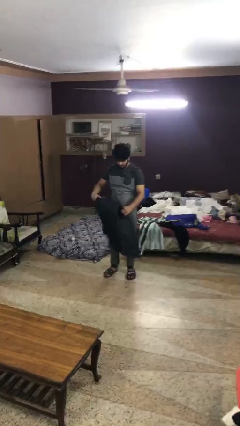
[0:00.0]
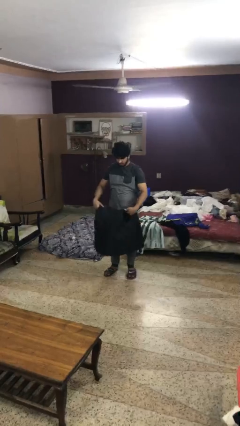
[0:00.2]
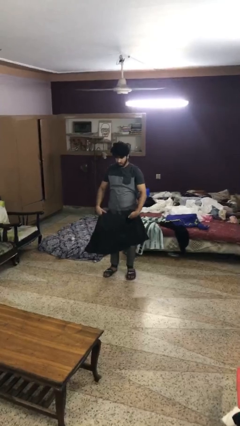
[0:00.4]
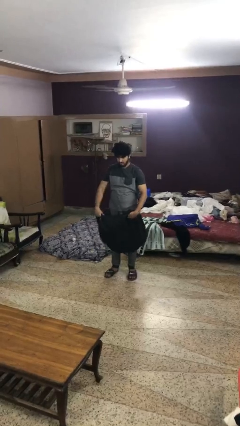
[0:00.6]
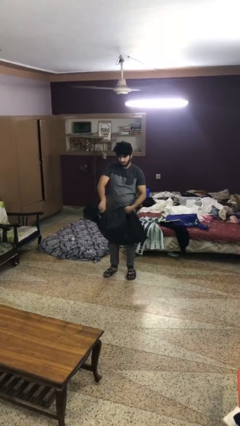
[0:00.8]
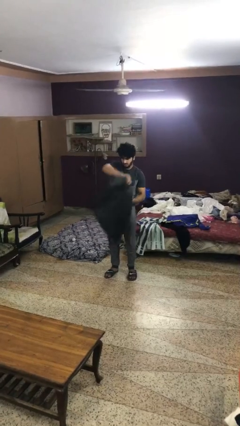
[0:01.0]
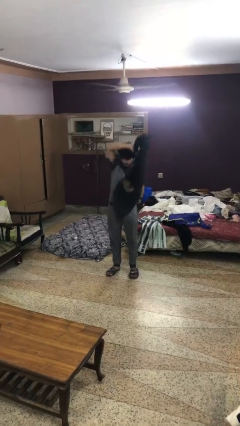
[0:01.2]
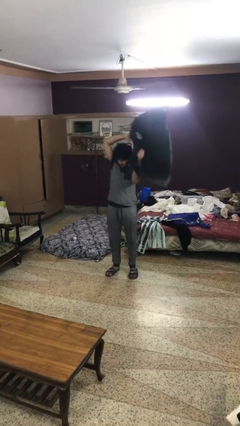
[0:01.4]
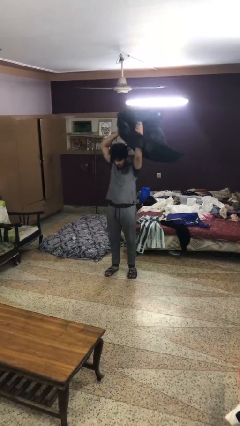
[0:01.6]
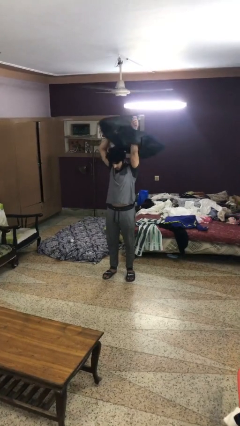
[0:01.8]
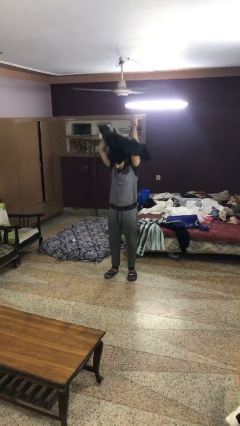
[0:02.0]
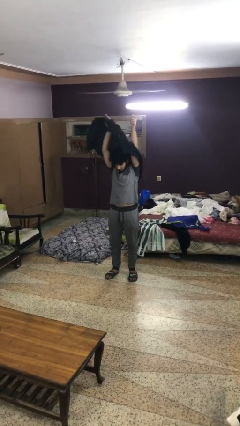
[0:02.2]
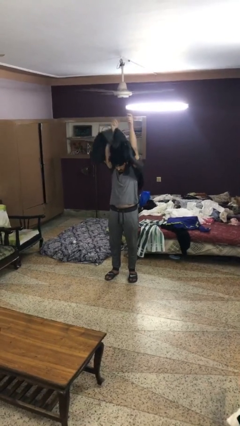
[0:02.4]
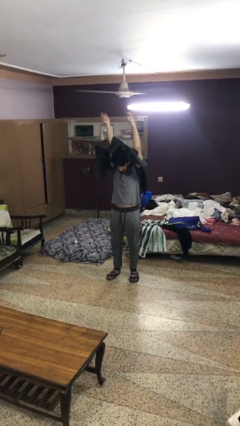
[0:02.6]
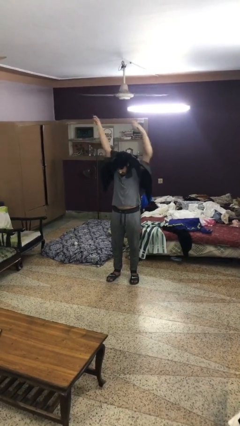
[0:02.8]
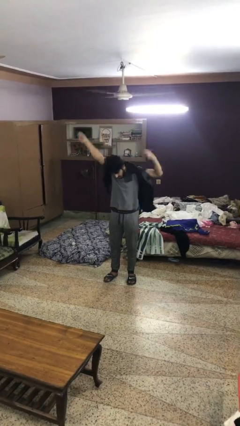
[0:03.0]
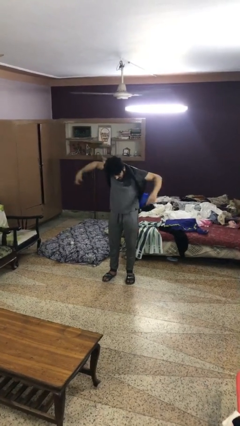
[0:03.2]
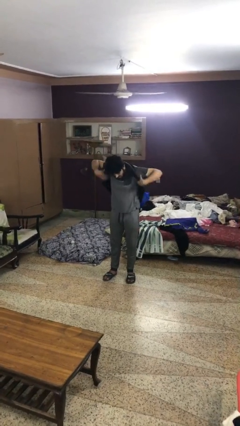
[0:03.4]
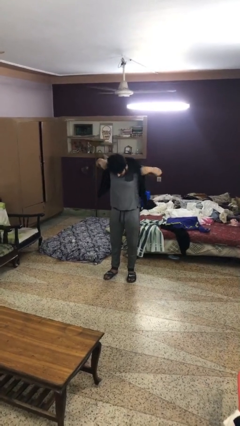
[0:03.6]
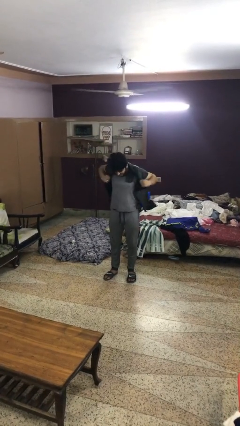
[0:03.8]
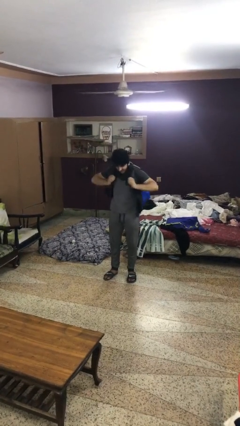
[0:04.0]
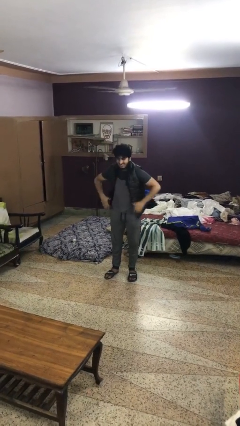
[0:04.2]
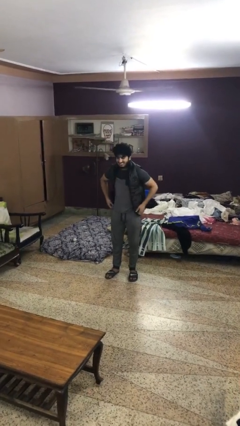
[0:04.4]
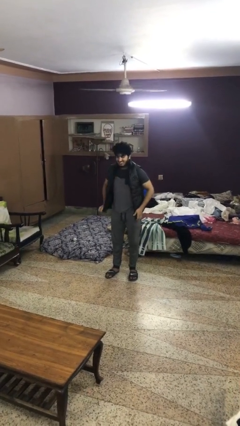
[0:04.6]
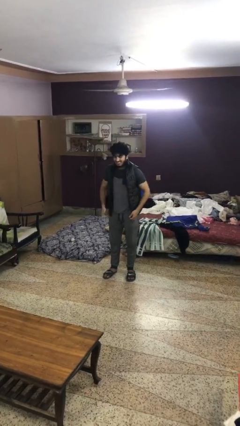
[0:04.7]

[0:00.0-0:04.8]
person puts on jacket

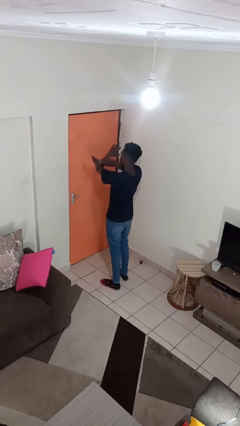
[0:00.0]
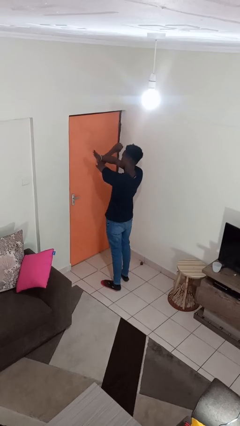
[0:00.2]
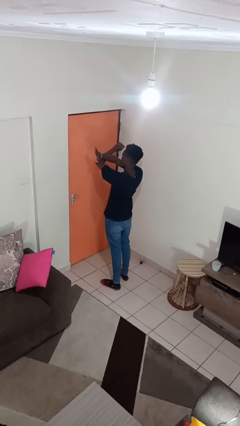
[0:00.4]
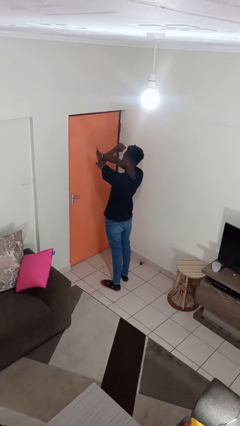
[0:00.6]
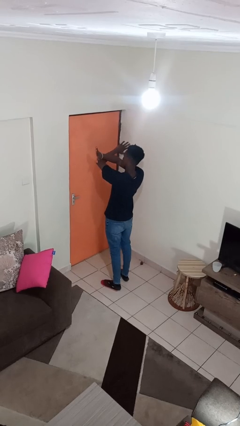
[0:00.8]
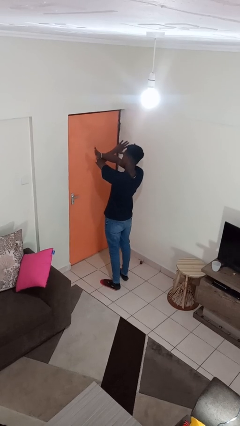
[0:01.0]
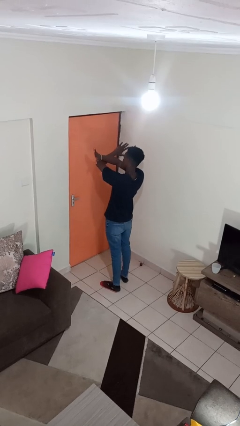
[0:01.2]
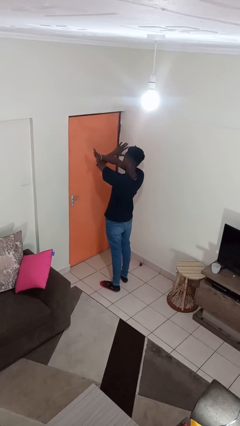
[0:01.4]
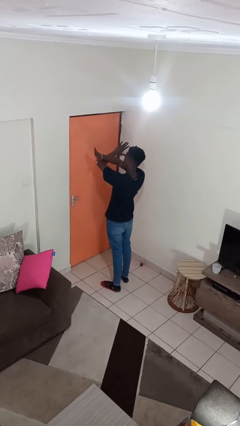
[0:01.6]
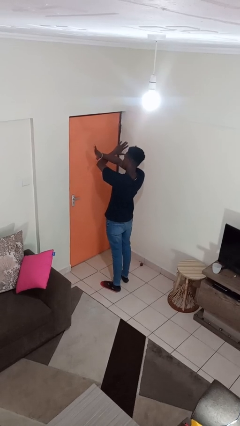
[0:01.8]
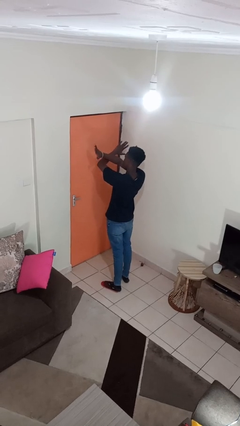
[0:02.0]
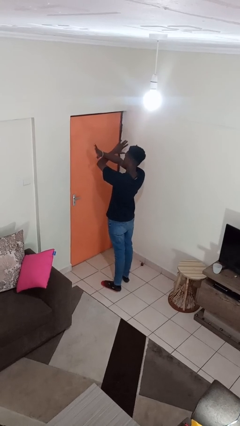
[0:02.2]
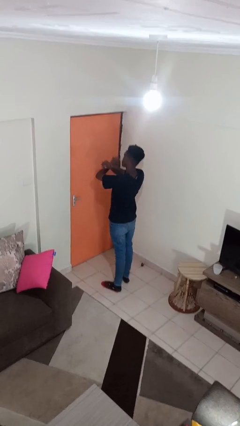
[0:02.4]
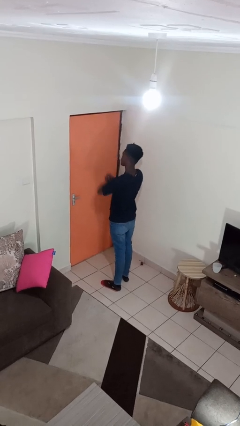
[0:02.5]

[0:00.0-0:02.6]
person gestures arms x

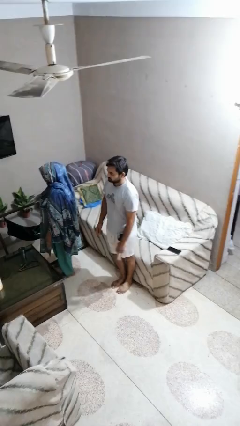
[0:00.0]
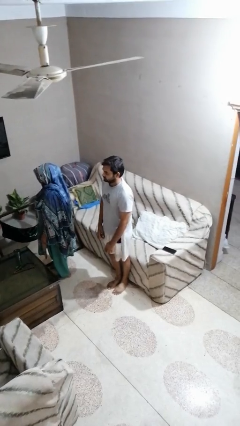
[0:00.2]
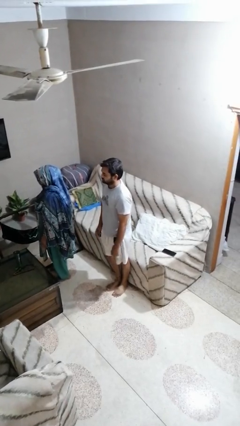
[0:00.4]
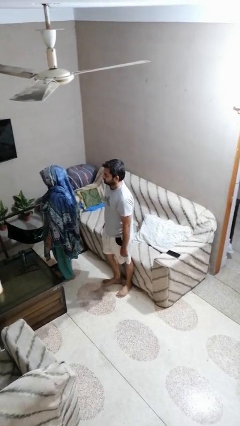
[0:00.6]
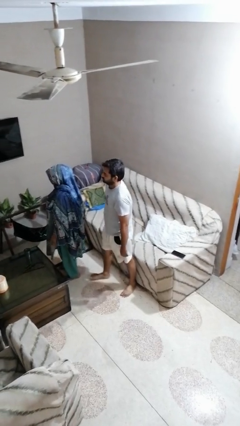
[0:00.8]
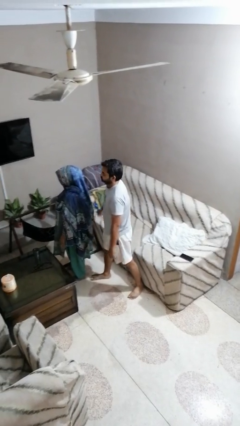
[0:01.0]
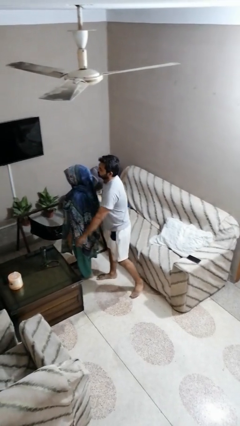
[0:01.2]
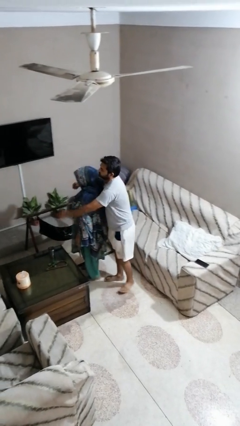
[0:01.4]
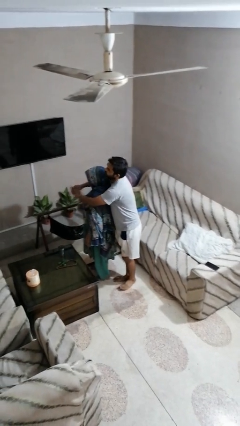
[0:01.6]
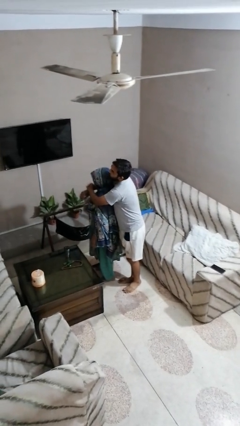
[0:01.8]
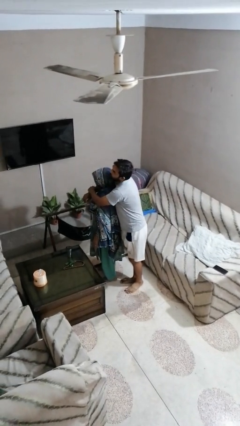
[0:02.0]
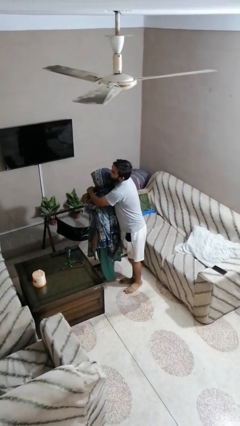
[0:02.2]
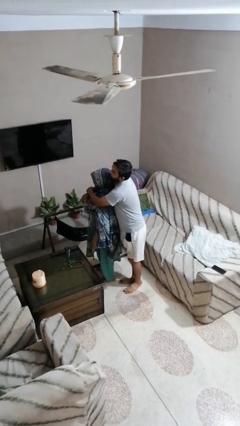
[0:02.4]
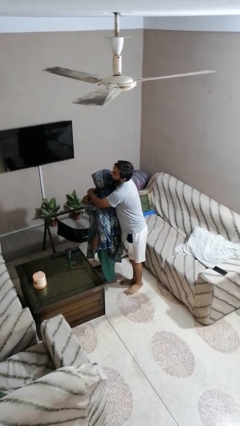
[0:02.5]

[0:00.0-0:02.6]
person hugs person from behind

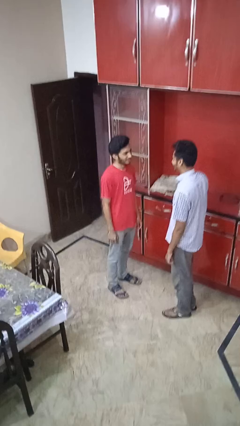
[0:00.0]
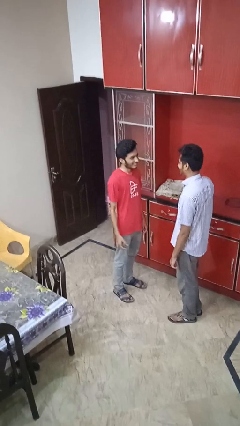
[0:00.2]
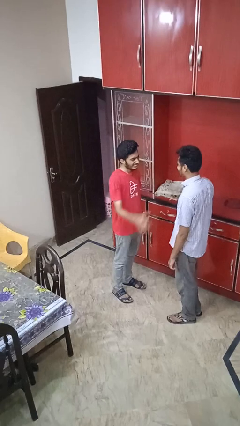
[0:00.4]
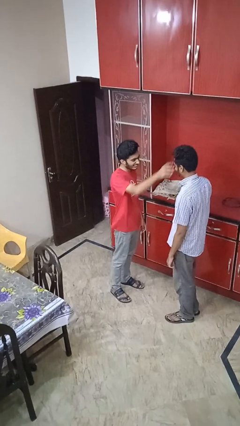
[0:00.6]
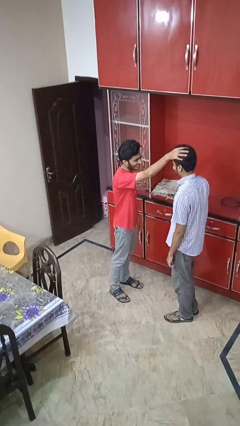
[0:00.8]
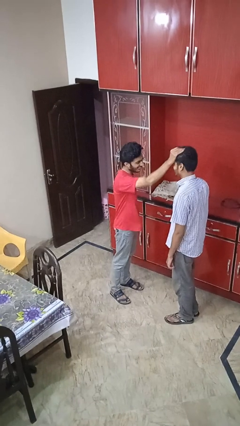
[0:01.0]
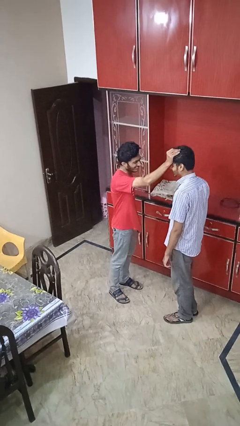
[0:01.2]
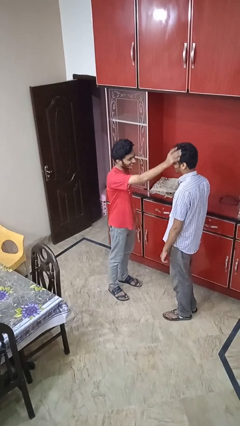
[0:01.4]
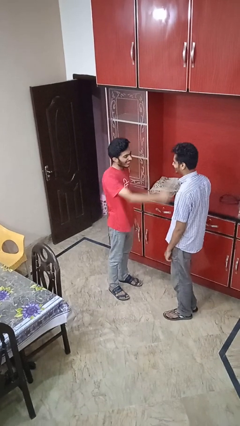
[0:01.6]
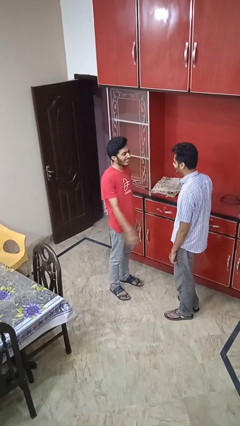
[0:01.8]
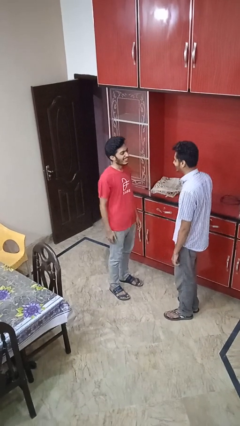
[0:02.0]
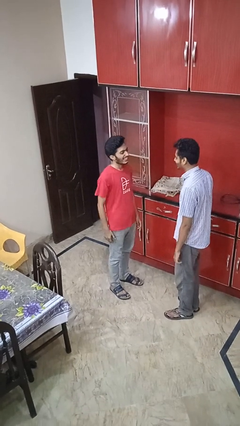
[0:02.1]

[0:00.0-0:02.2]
person grabs person by hair

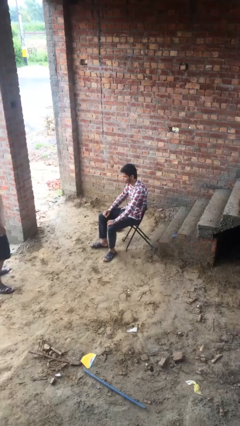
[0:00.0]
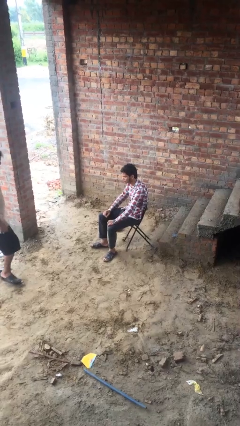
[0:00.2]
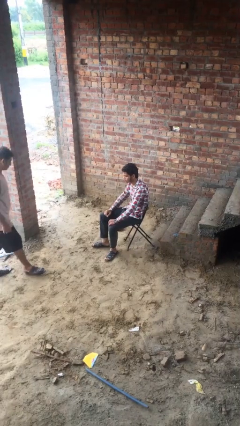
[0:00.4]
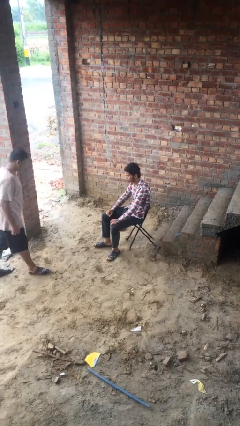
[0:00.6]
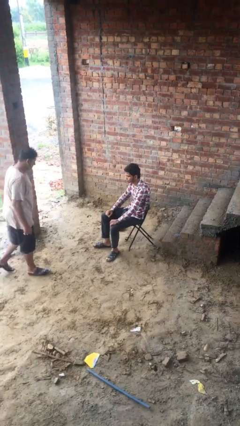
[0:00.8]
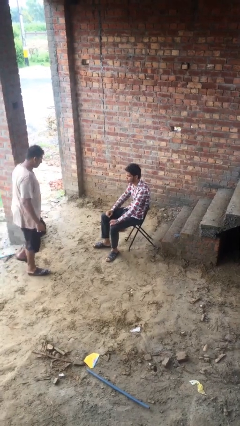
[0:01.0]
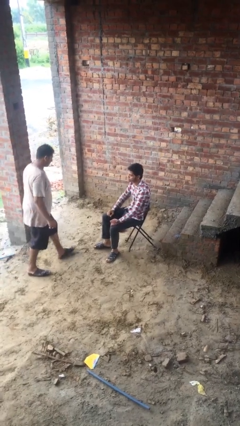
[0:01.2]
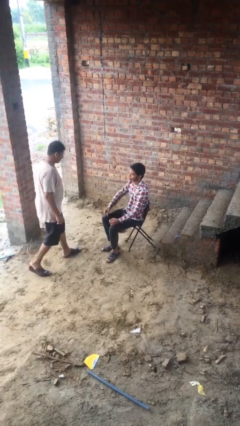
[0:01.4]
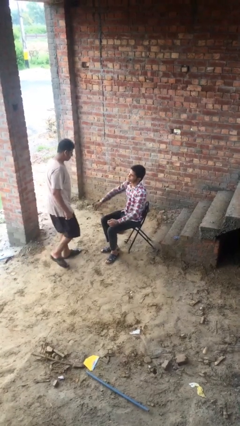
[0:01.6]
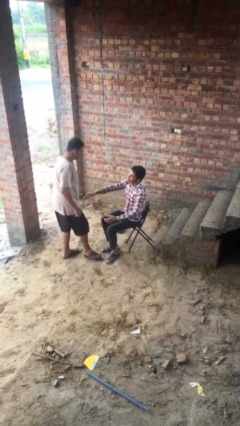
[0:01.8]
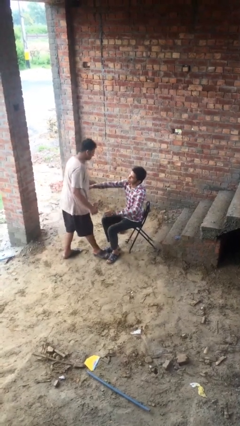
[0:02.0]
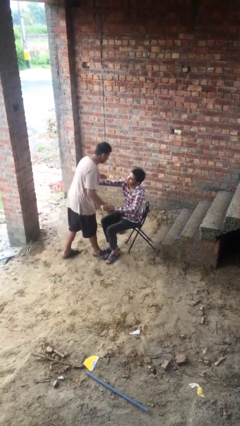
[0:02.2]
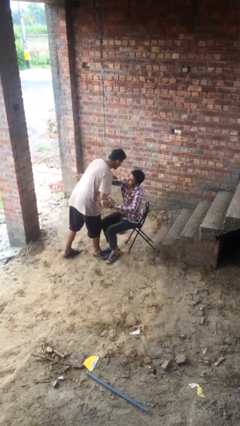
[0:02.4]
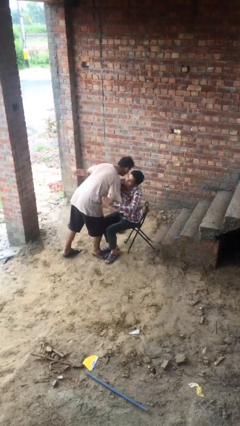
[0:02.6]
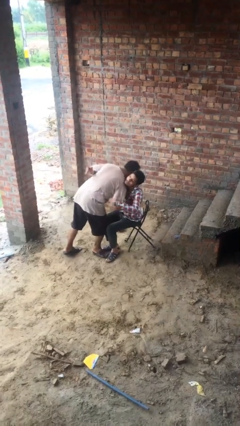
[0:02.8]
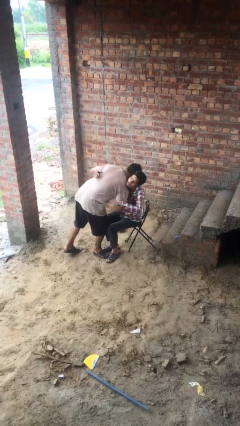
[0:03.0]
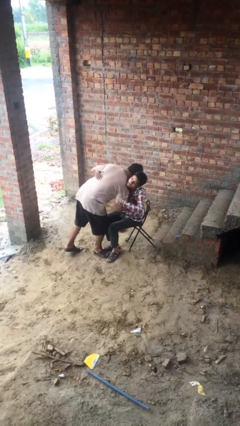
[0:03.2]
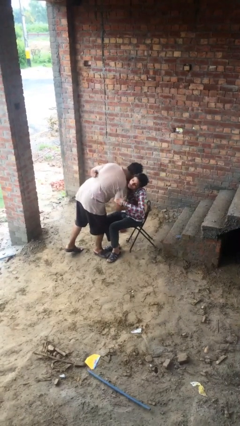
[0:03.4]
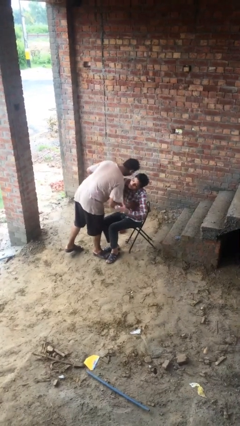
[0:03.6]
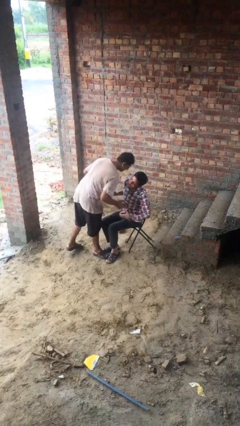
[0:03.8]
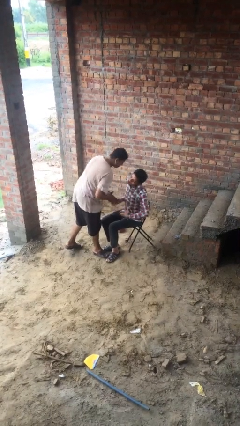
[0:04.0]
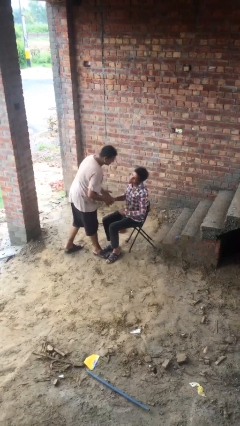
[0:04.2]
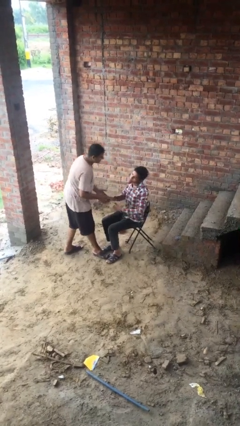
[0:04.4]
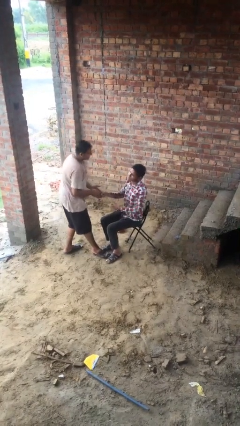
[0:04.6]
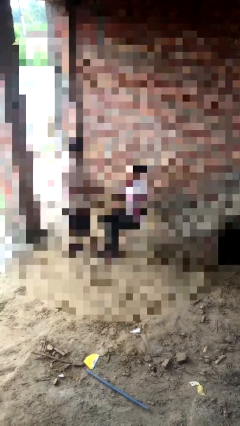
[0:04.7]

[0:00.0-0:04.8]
person embraces person

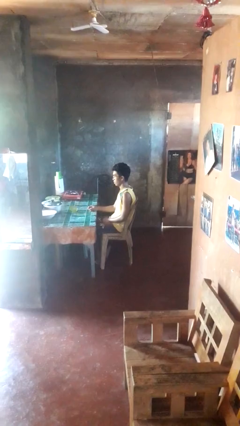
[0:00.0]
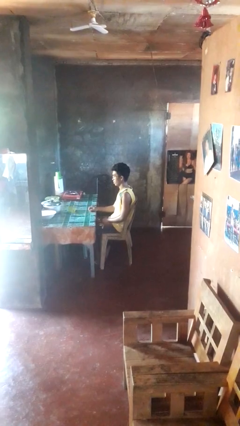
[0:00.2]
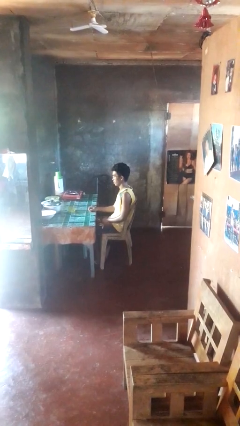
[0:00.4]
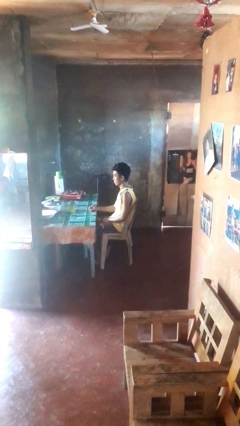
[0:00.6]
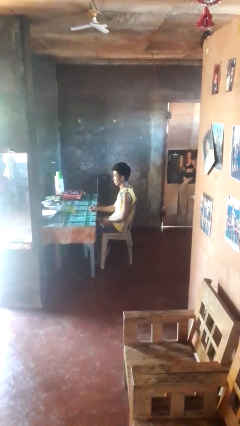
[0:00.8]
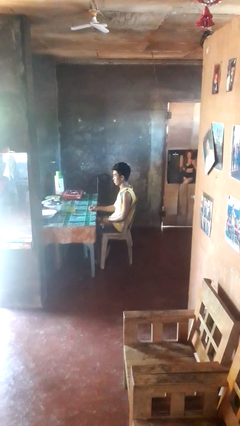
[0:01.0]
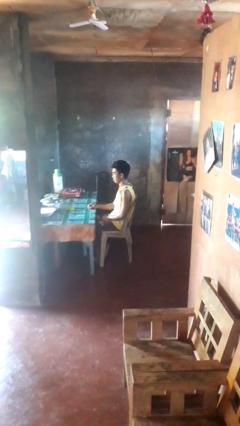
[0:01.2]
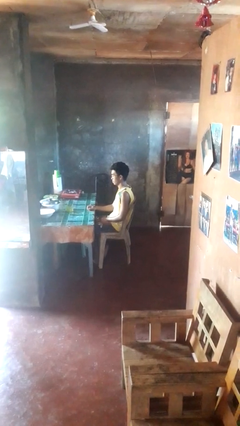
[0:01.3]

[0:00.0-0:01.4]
person knocks over glass
